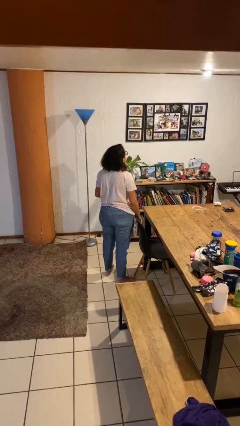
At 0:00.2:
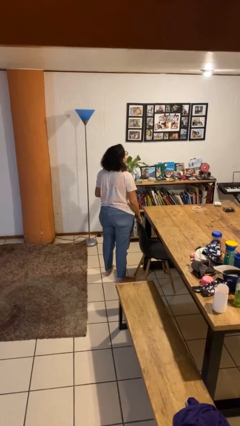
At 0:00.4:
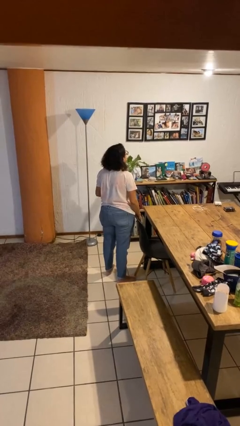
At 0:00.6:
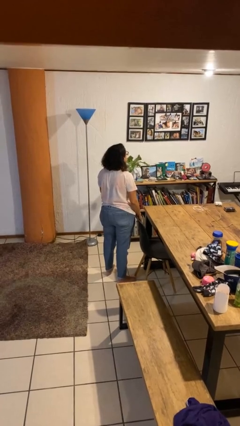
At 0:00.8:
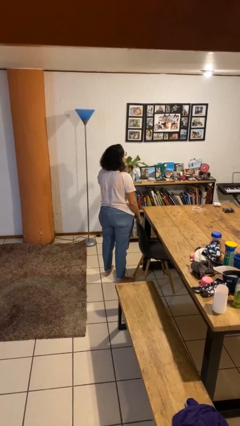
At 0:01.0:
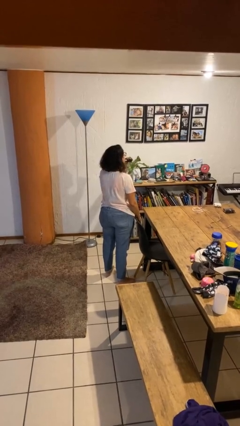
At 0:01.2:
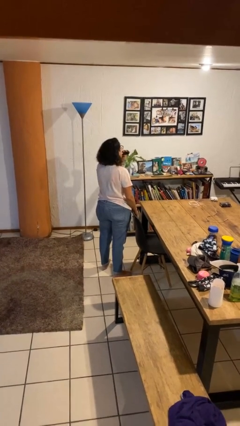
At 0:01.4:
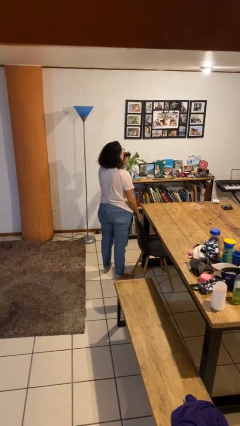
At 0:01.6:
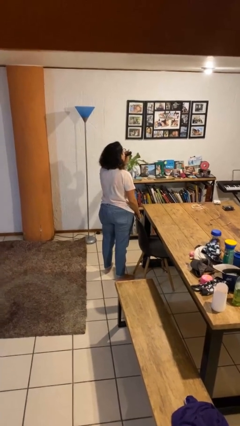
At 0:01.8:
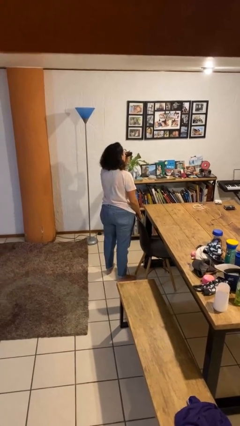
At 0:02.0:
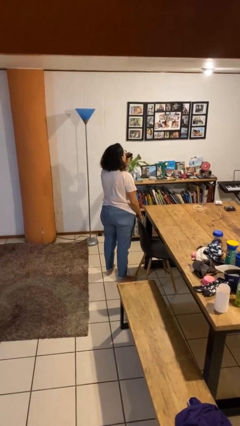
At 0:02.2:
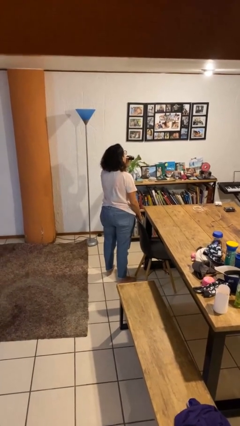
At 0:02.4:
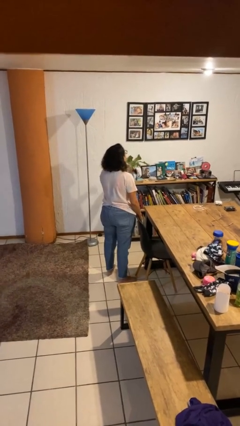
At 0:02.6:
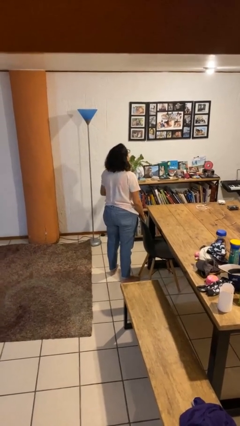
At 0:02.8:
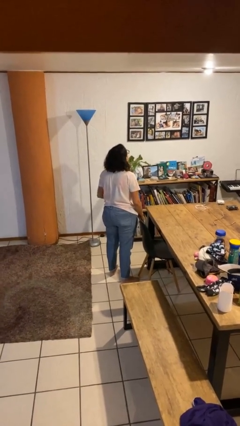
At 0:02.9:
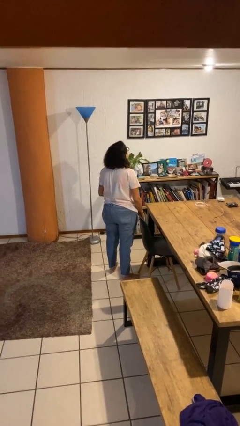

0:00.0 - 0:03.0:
person vapes

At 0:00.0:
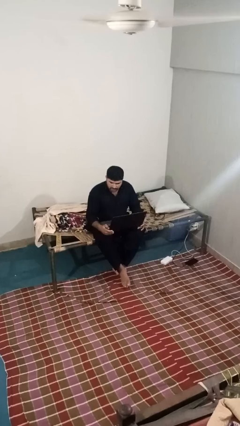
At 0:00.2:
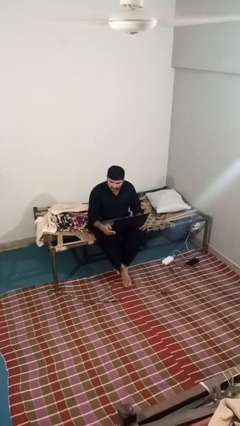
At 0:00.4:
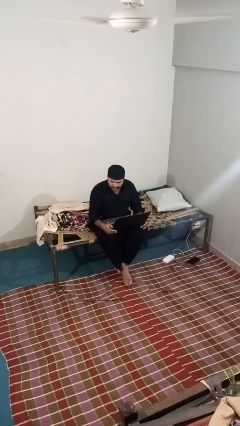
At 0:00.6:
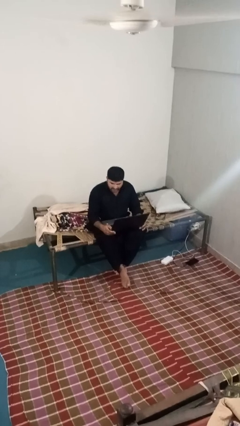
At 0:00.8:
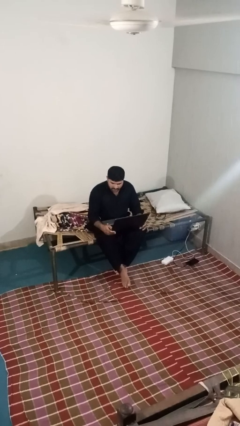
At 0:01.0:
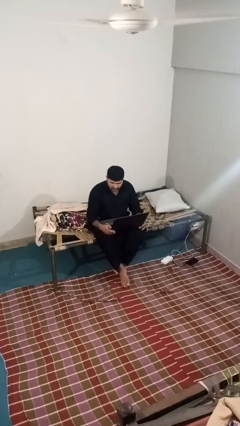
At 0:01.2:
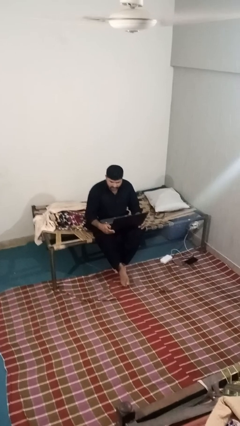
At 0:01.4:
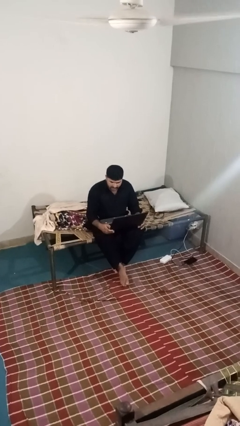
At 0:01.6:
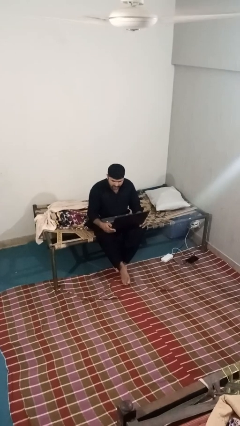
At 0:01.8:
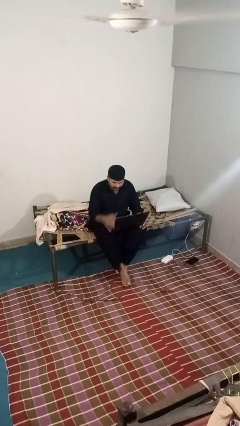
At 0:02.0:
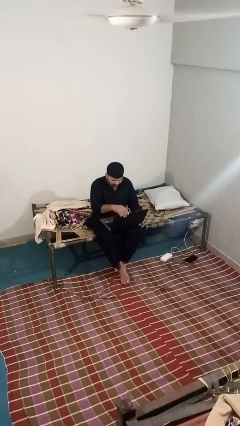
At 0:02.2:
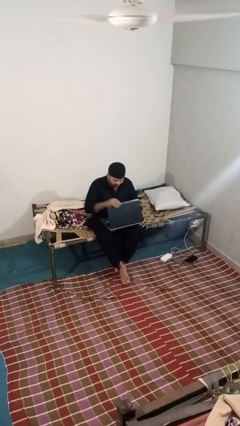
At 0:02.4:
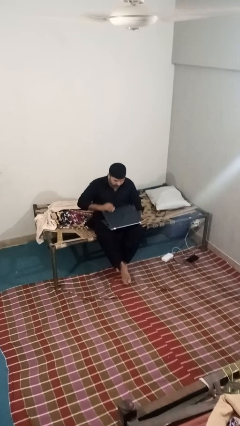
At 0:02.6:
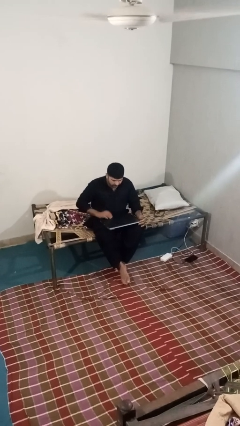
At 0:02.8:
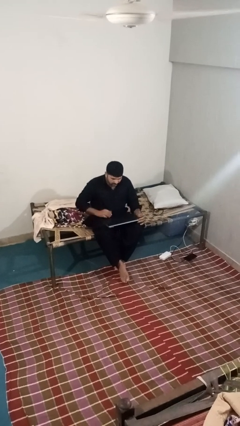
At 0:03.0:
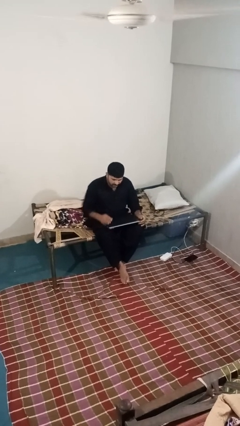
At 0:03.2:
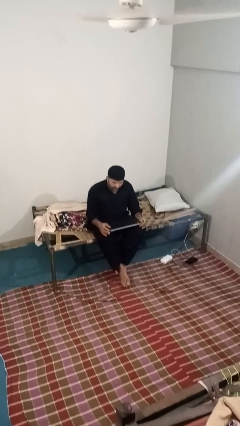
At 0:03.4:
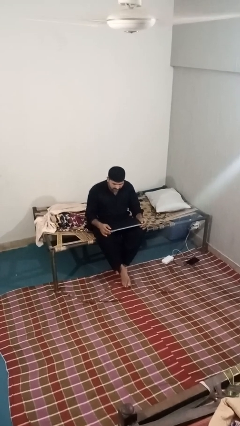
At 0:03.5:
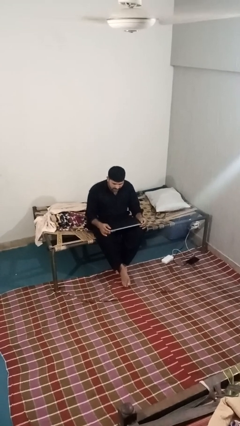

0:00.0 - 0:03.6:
person closes laptop

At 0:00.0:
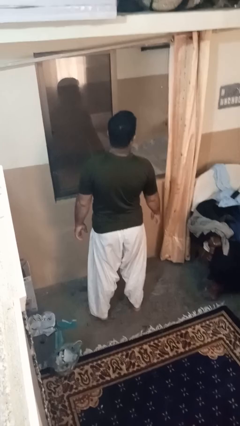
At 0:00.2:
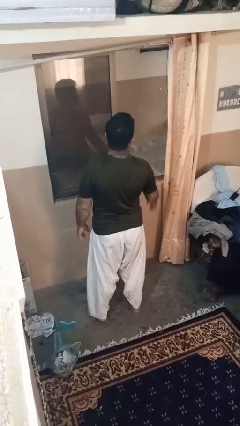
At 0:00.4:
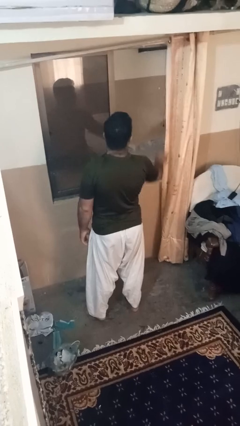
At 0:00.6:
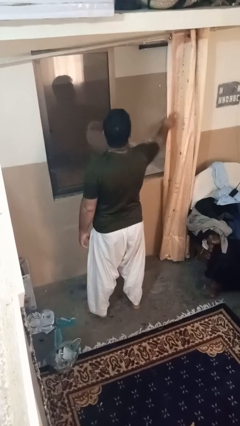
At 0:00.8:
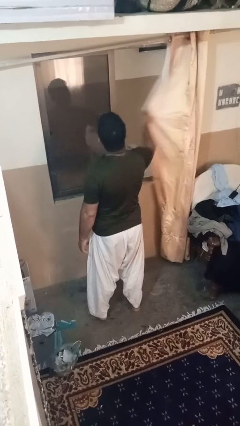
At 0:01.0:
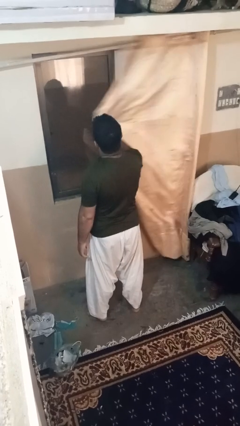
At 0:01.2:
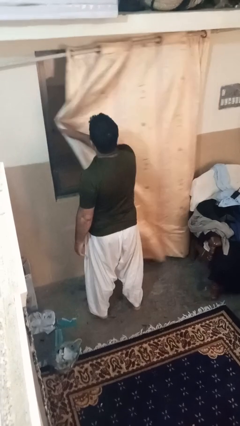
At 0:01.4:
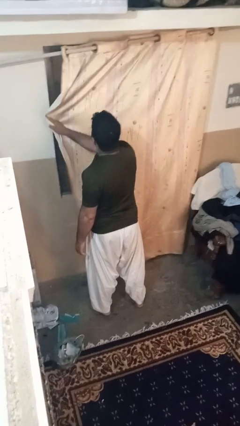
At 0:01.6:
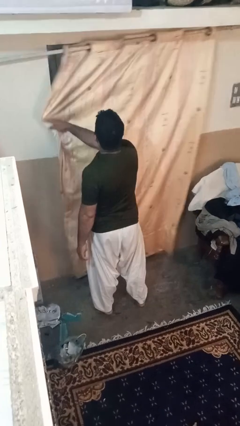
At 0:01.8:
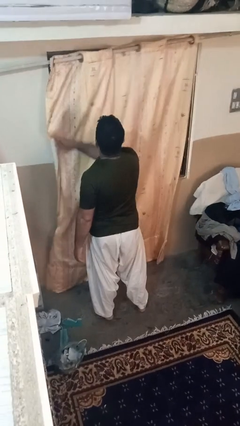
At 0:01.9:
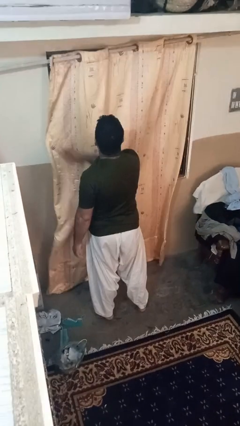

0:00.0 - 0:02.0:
person closes curtains

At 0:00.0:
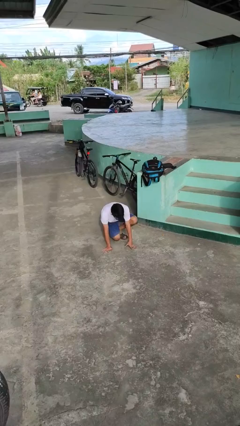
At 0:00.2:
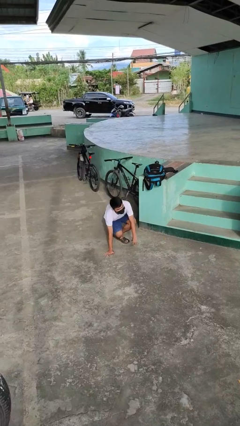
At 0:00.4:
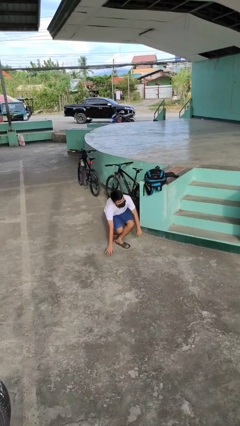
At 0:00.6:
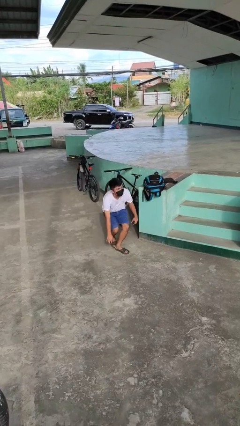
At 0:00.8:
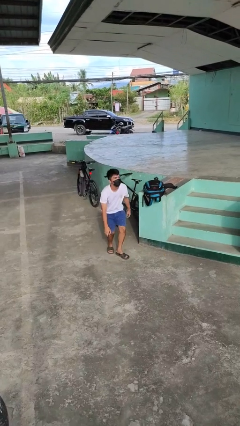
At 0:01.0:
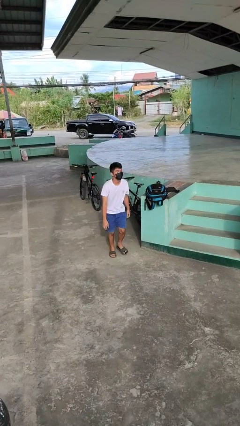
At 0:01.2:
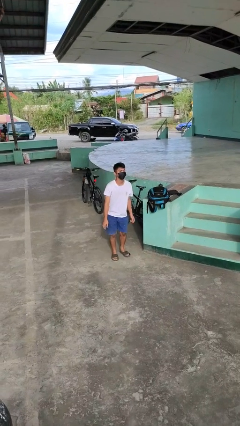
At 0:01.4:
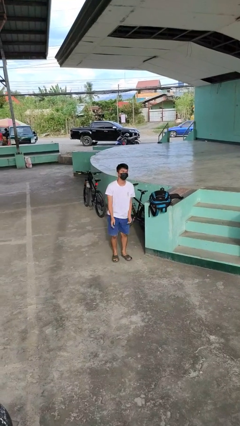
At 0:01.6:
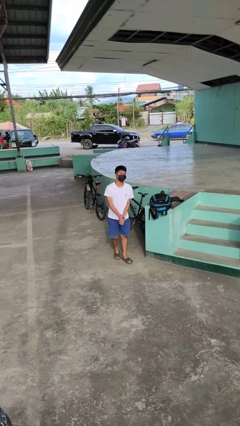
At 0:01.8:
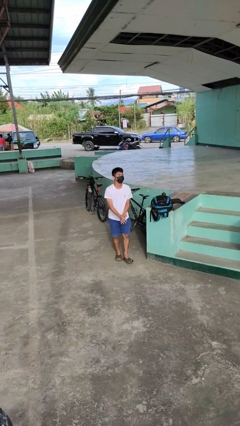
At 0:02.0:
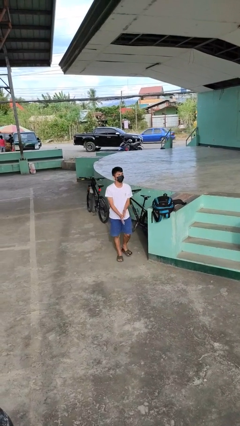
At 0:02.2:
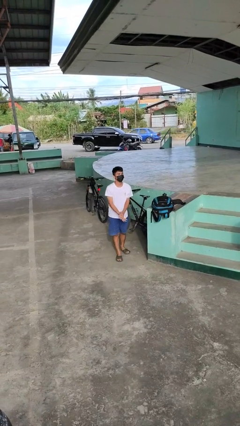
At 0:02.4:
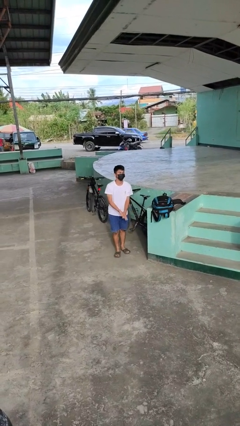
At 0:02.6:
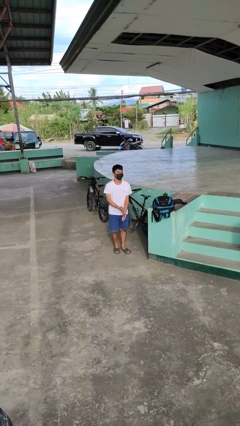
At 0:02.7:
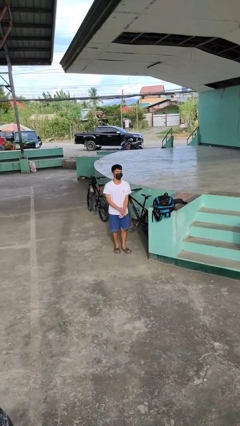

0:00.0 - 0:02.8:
person stands up from floor

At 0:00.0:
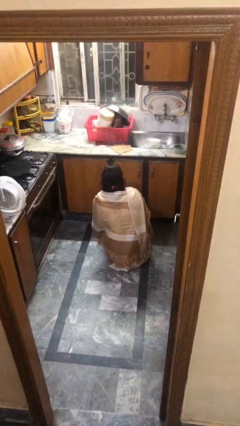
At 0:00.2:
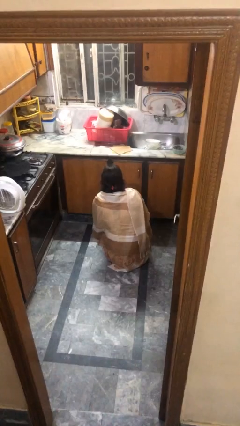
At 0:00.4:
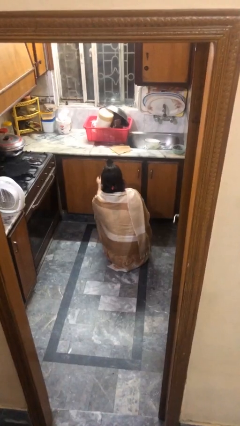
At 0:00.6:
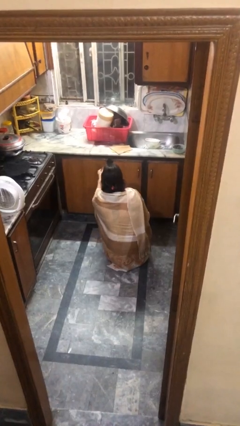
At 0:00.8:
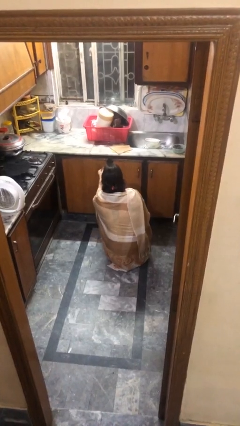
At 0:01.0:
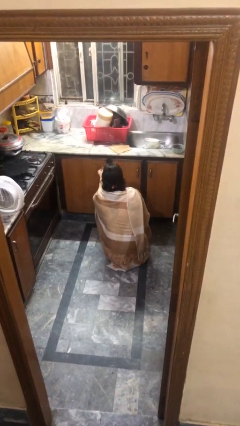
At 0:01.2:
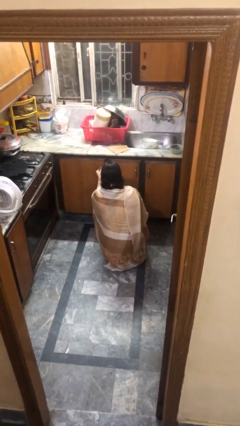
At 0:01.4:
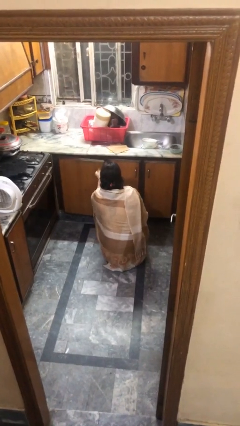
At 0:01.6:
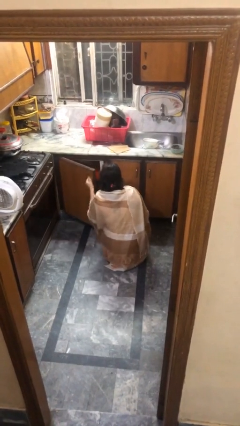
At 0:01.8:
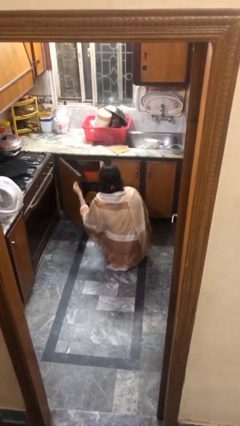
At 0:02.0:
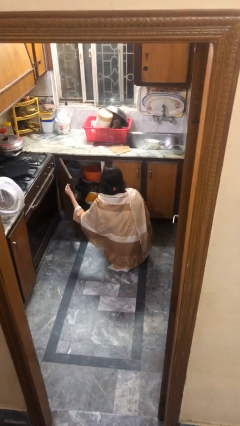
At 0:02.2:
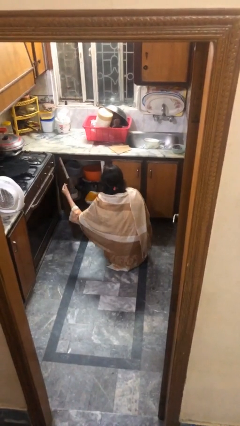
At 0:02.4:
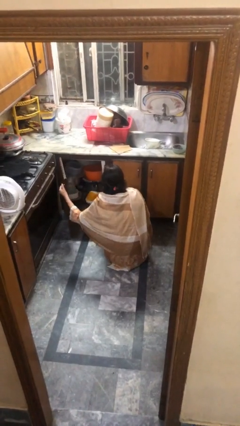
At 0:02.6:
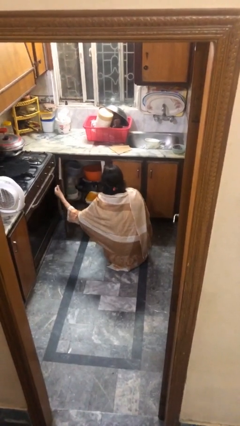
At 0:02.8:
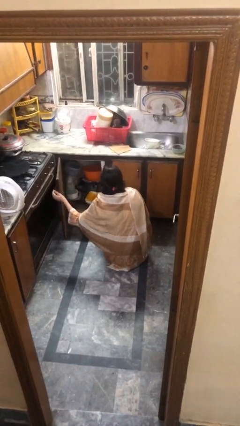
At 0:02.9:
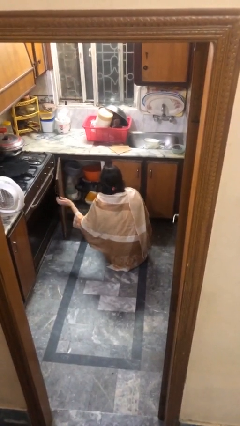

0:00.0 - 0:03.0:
person opens kitchen drawer

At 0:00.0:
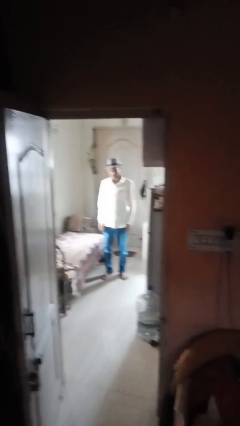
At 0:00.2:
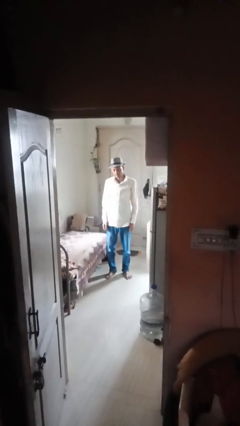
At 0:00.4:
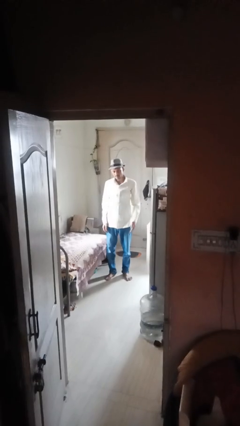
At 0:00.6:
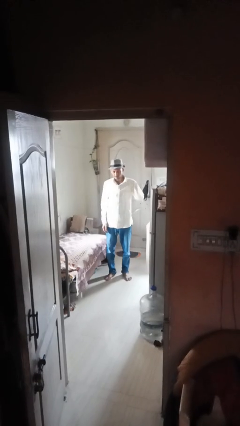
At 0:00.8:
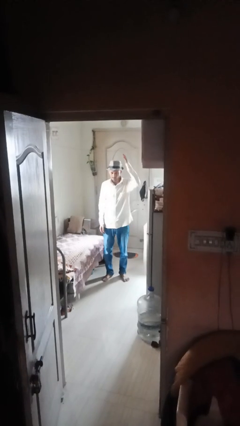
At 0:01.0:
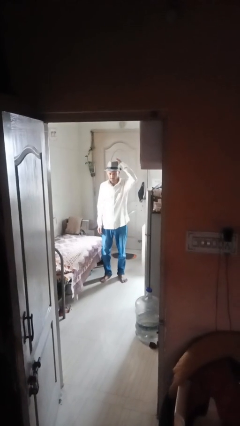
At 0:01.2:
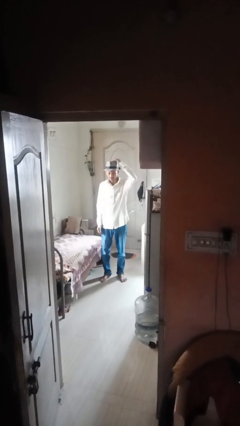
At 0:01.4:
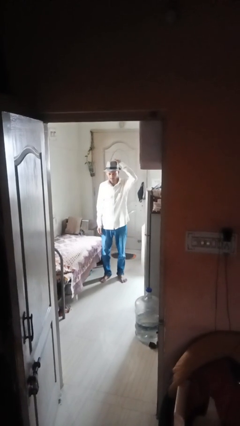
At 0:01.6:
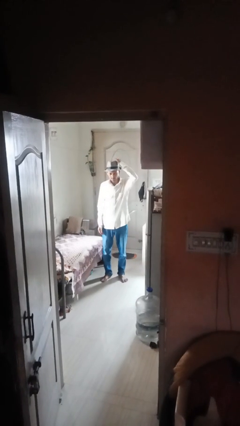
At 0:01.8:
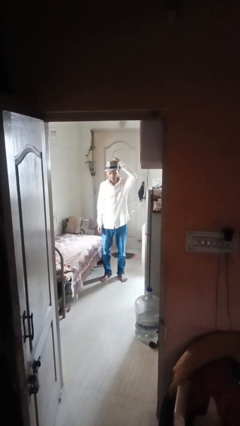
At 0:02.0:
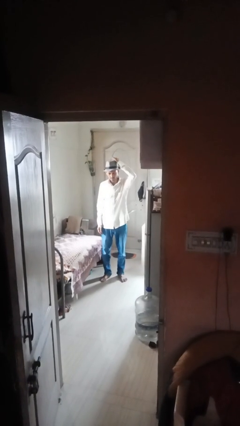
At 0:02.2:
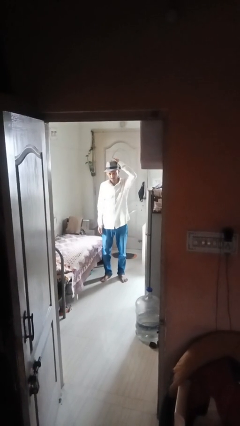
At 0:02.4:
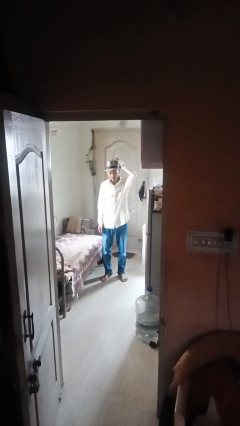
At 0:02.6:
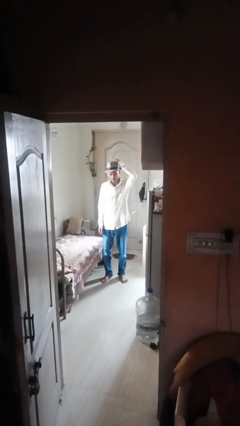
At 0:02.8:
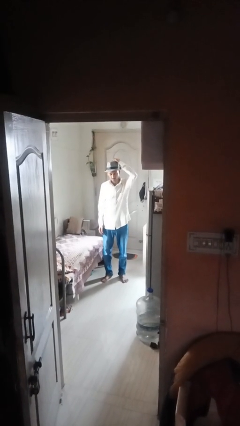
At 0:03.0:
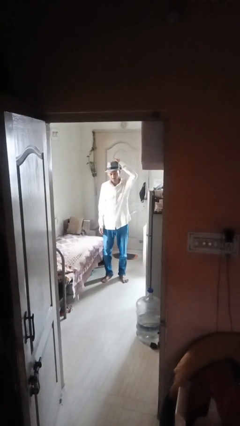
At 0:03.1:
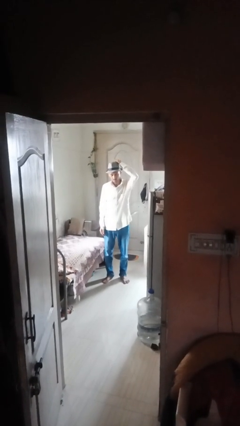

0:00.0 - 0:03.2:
person pats head
